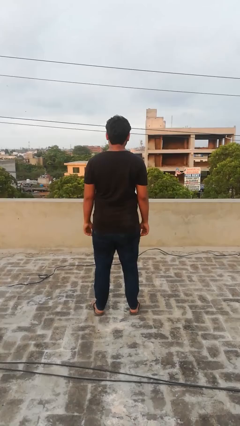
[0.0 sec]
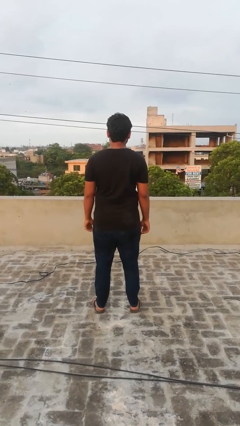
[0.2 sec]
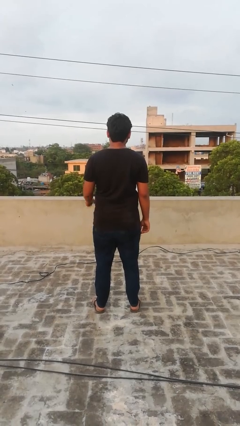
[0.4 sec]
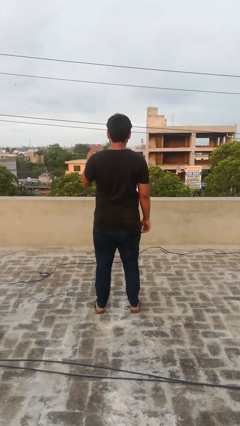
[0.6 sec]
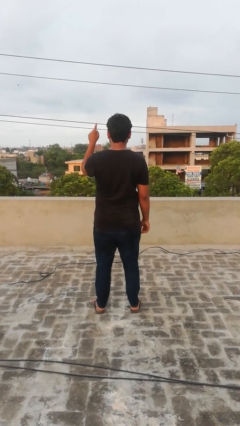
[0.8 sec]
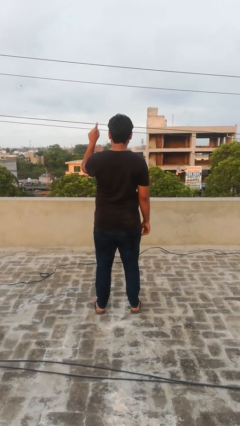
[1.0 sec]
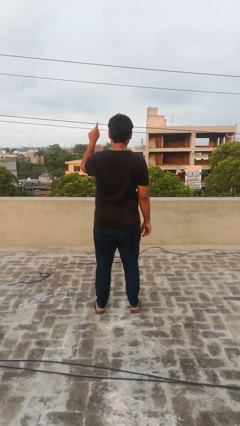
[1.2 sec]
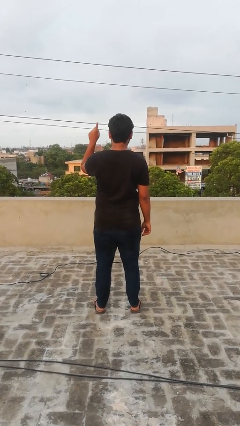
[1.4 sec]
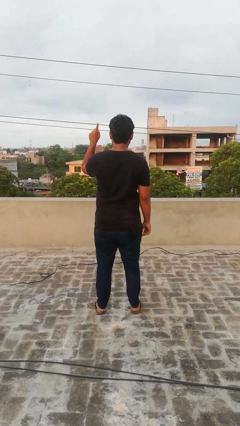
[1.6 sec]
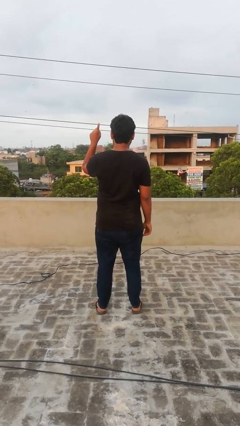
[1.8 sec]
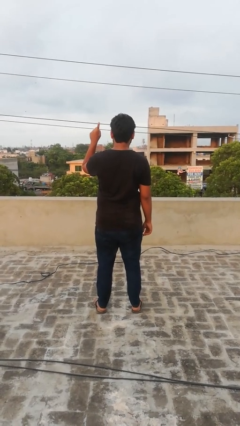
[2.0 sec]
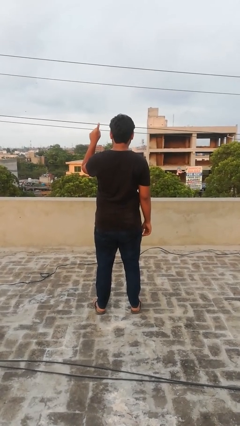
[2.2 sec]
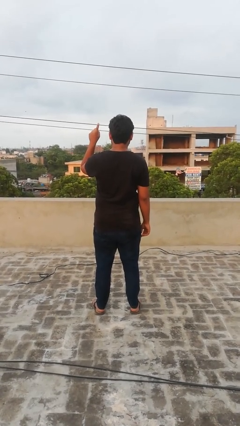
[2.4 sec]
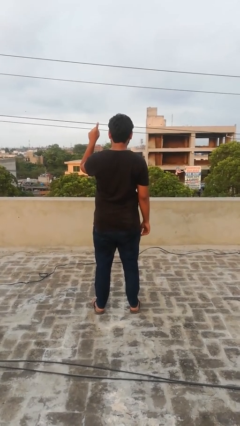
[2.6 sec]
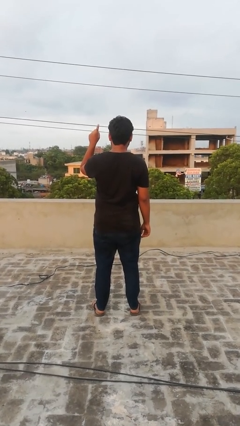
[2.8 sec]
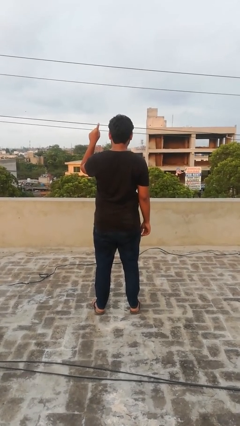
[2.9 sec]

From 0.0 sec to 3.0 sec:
person gestures number one

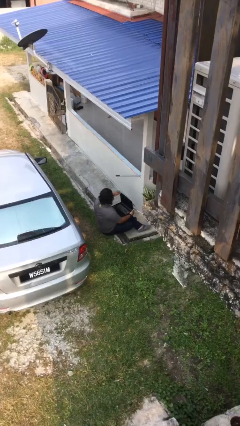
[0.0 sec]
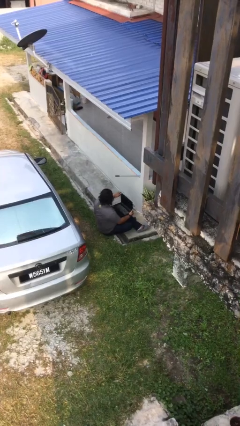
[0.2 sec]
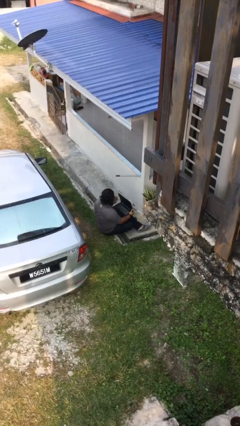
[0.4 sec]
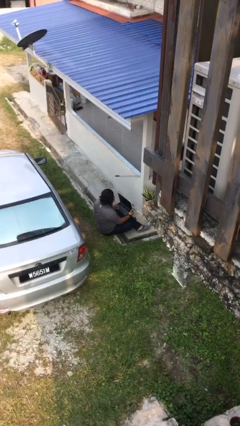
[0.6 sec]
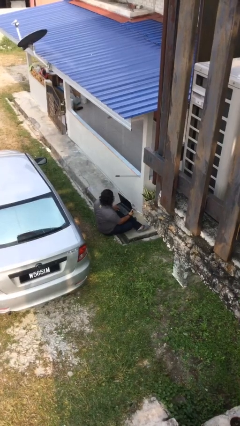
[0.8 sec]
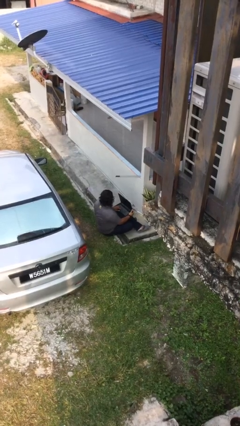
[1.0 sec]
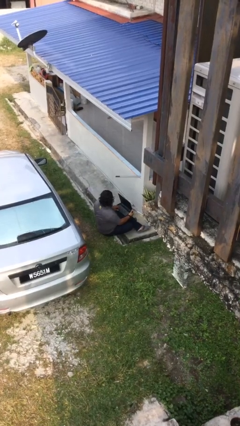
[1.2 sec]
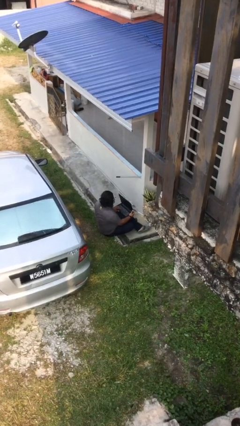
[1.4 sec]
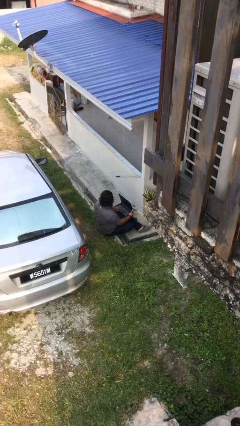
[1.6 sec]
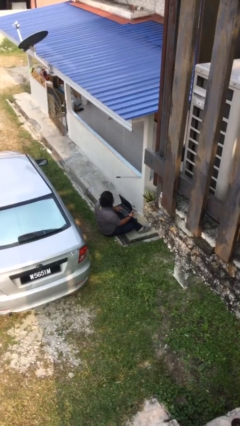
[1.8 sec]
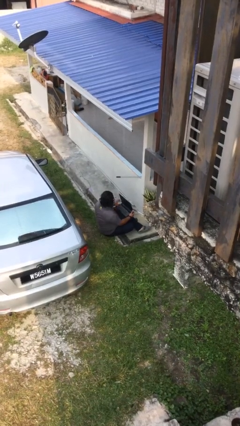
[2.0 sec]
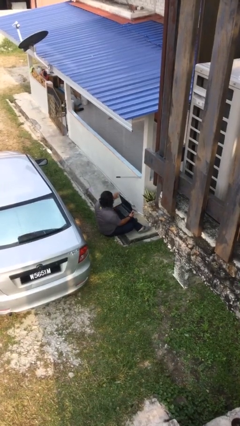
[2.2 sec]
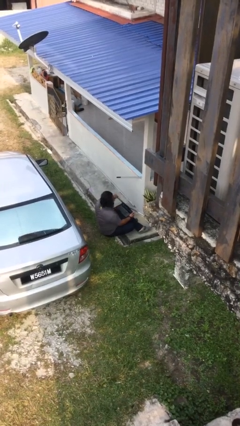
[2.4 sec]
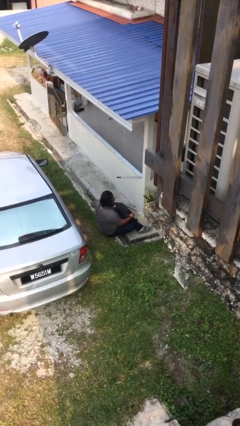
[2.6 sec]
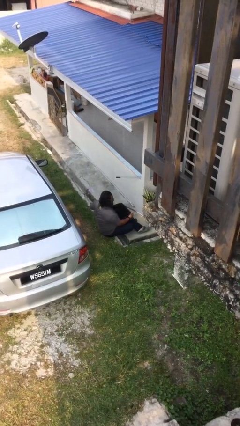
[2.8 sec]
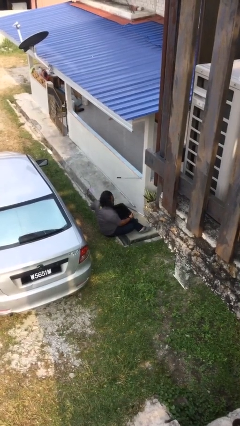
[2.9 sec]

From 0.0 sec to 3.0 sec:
person interacts with laptop

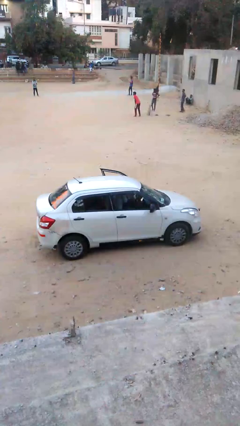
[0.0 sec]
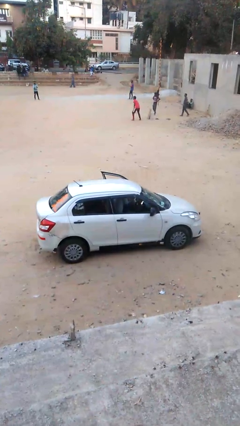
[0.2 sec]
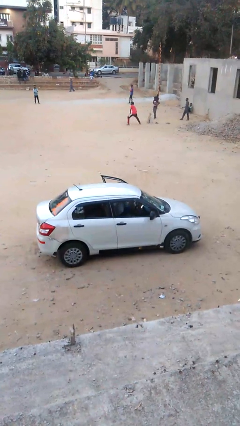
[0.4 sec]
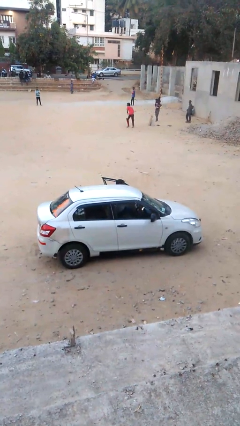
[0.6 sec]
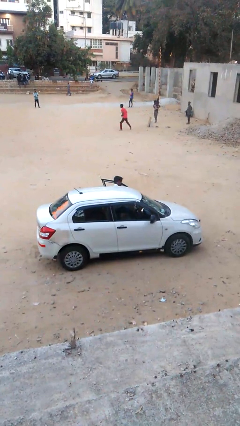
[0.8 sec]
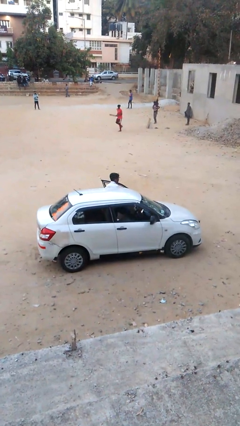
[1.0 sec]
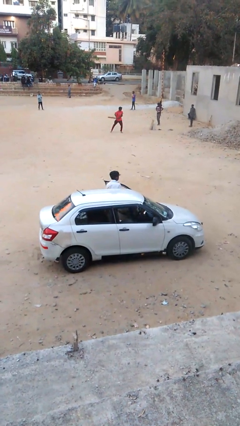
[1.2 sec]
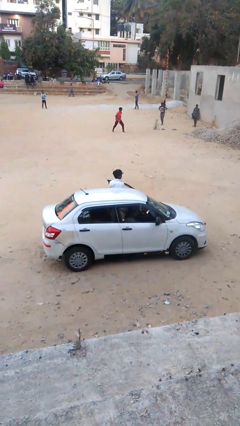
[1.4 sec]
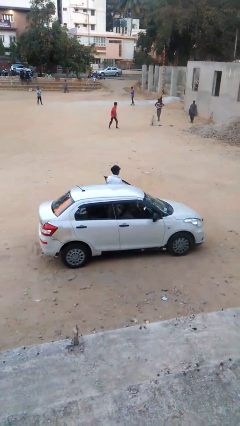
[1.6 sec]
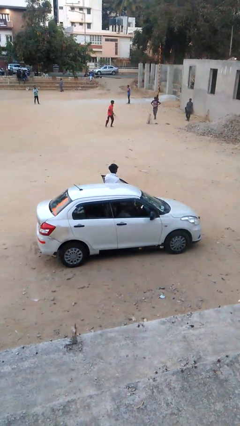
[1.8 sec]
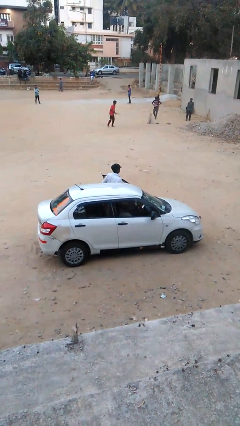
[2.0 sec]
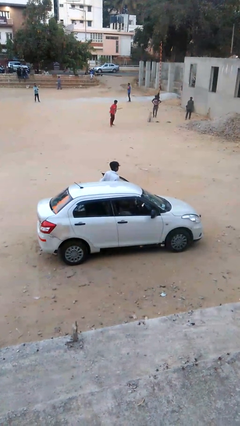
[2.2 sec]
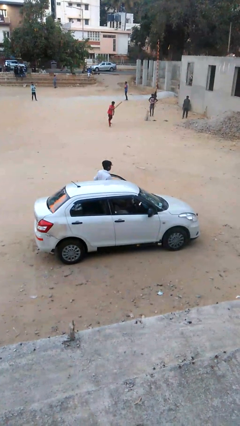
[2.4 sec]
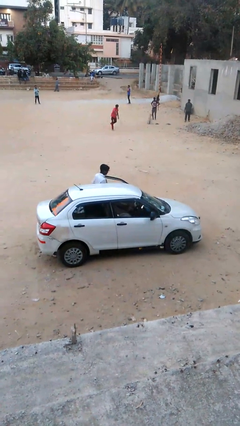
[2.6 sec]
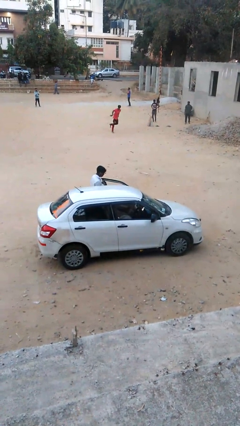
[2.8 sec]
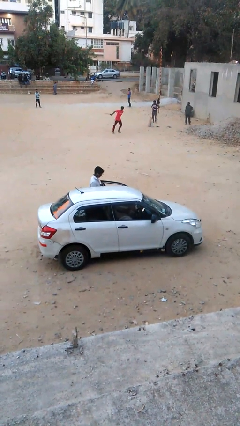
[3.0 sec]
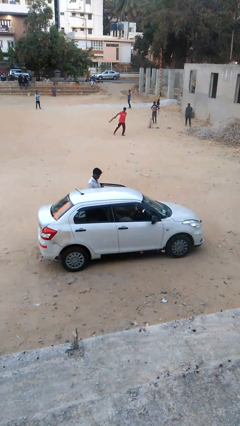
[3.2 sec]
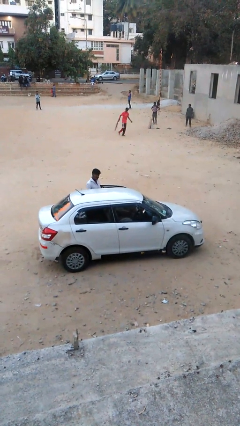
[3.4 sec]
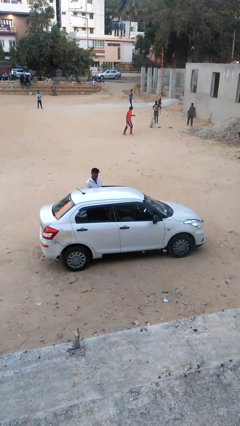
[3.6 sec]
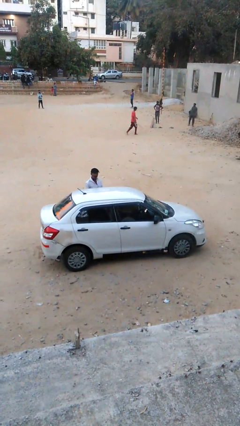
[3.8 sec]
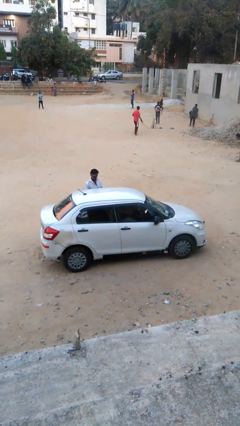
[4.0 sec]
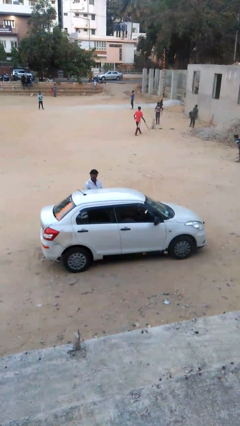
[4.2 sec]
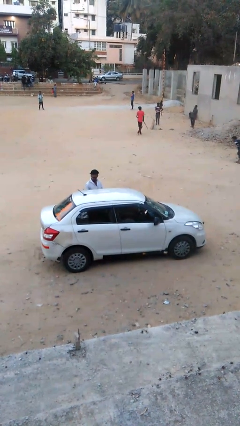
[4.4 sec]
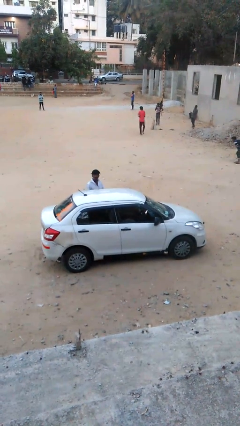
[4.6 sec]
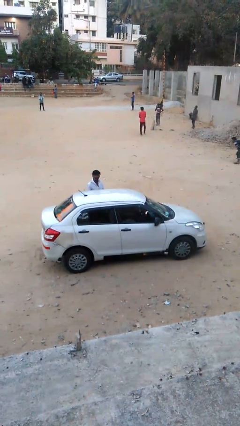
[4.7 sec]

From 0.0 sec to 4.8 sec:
car drops off person

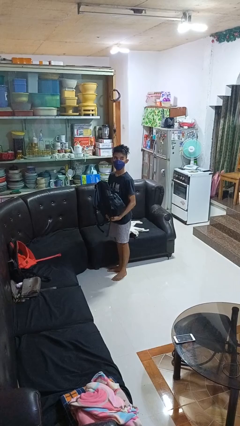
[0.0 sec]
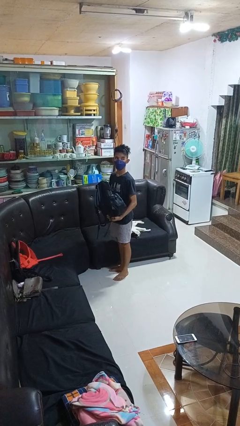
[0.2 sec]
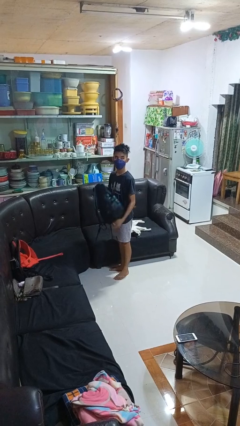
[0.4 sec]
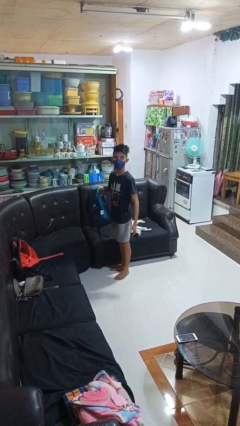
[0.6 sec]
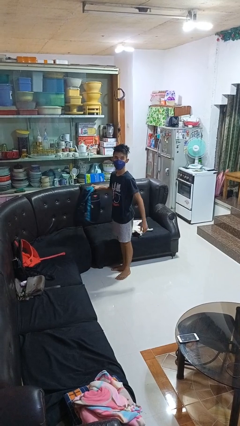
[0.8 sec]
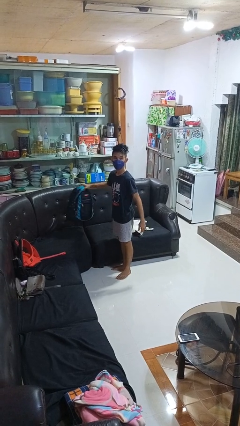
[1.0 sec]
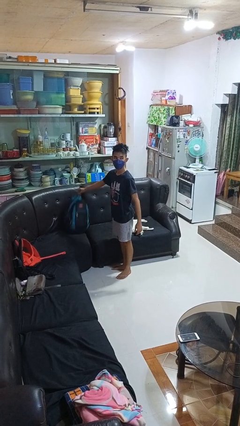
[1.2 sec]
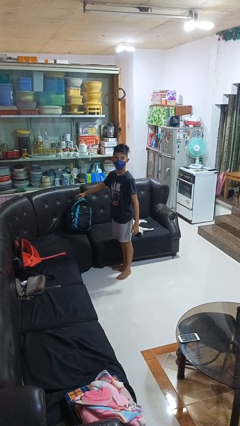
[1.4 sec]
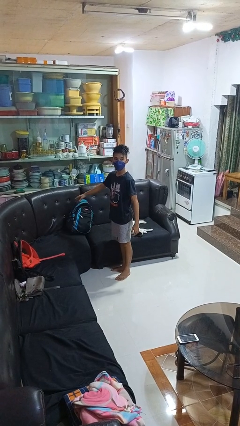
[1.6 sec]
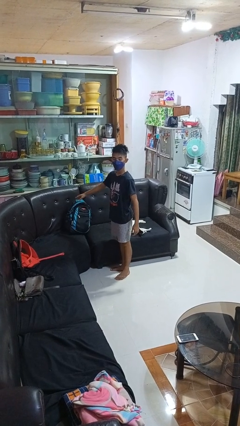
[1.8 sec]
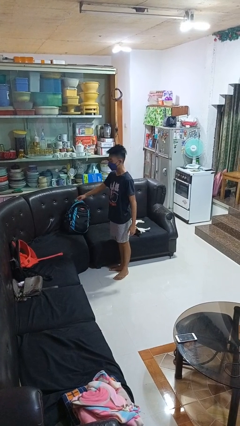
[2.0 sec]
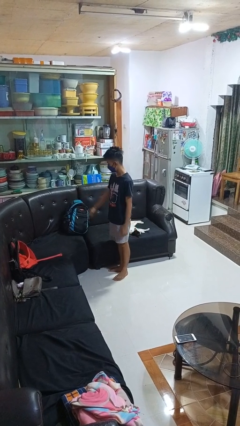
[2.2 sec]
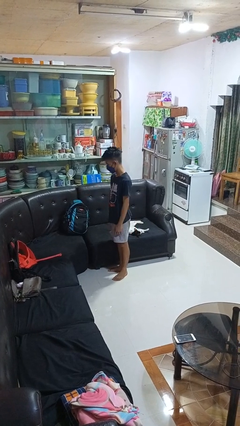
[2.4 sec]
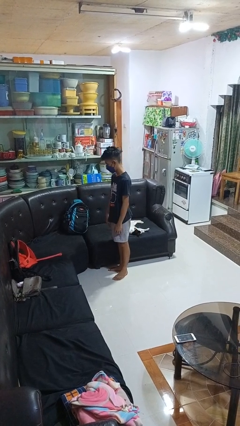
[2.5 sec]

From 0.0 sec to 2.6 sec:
person puts down object on couch

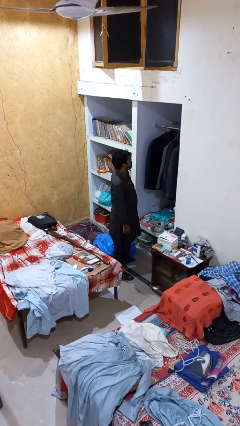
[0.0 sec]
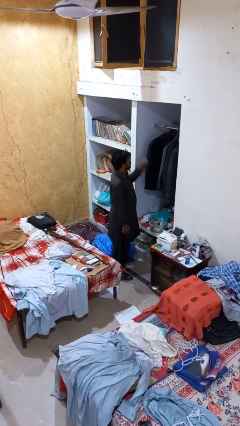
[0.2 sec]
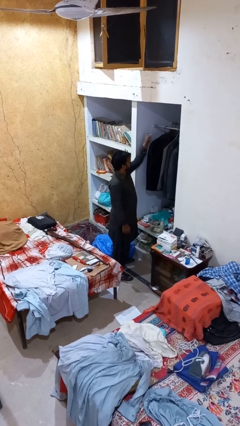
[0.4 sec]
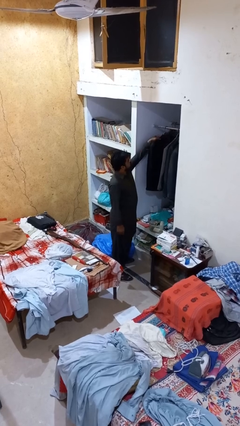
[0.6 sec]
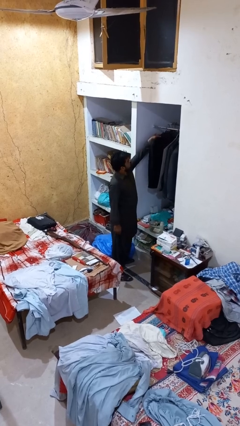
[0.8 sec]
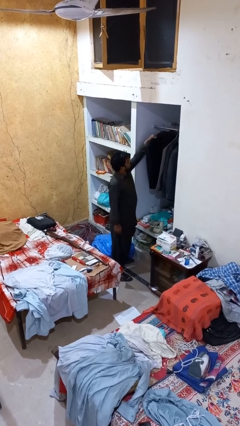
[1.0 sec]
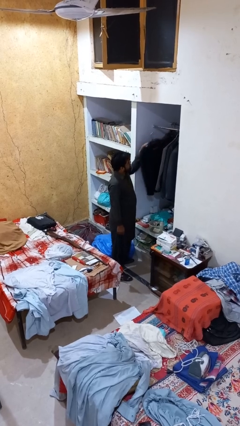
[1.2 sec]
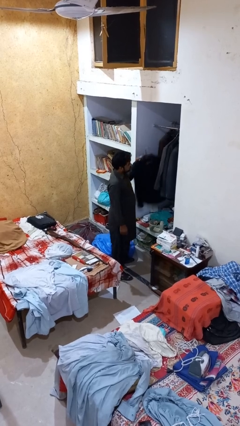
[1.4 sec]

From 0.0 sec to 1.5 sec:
person takes clothes from closet

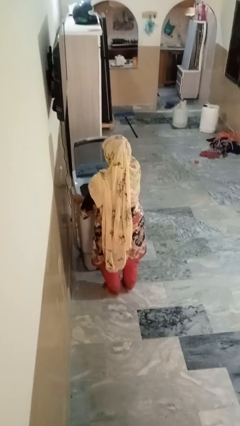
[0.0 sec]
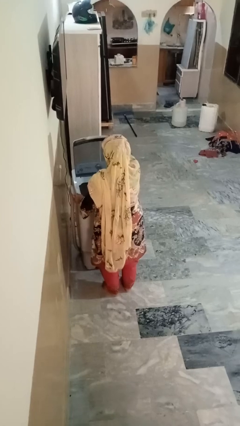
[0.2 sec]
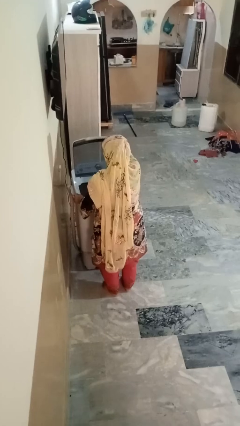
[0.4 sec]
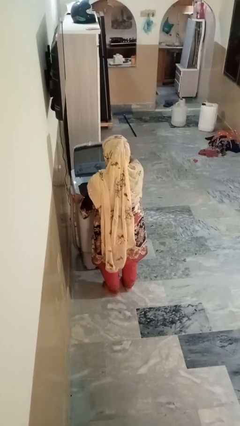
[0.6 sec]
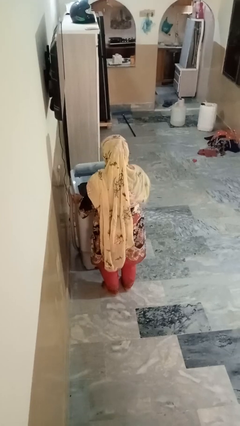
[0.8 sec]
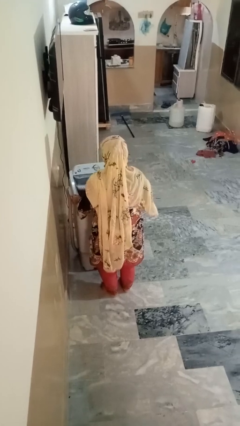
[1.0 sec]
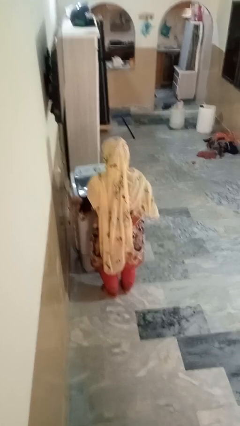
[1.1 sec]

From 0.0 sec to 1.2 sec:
person closes clothes washer

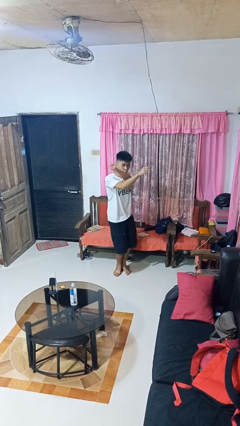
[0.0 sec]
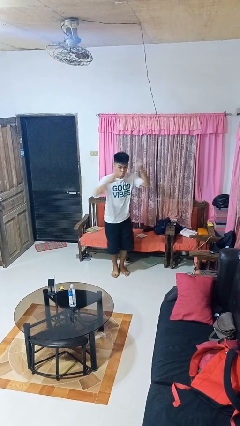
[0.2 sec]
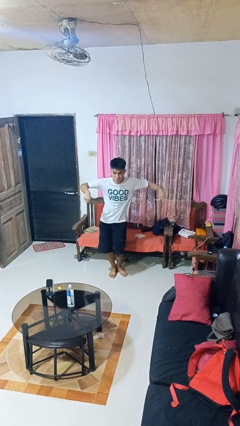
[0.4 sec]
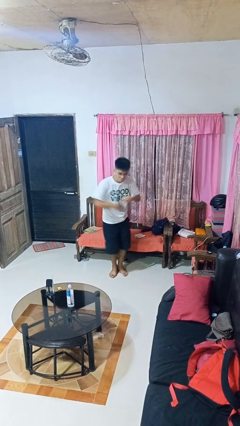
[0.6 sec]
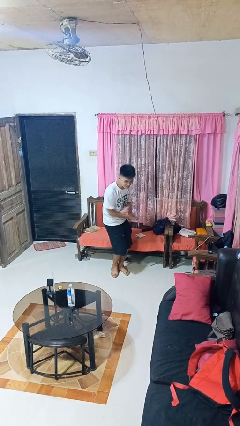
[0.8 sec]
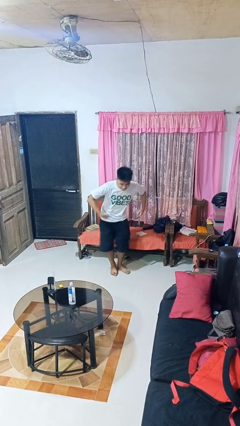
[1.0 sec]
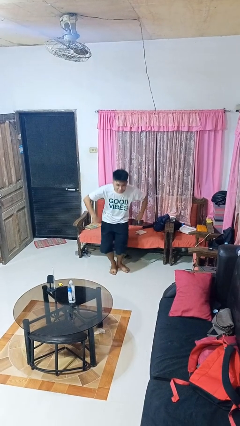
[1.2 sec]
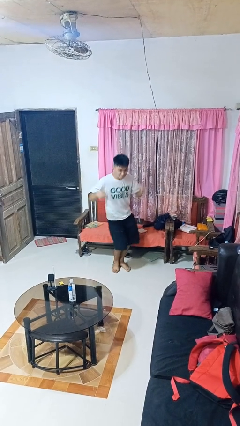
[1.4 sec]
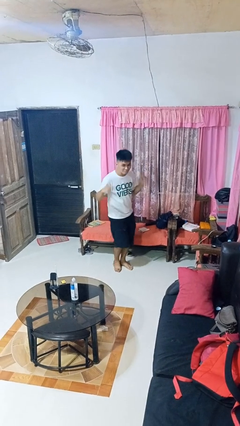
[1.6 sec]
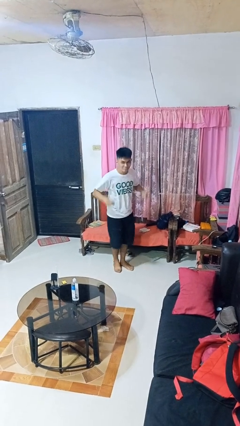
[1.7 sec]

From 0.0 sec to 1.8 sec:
person dances in place
